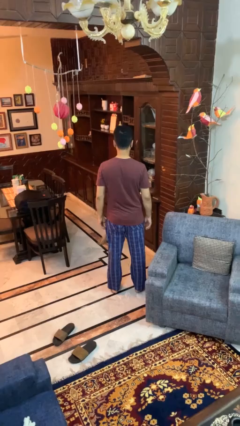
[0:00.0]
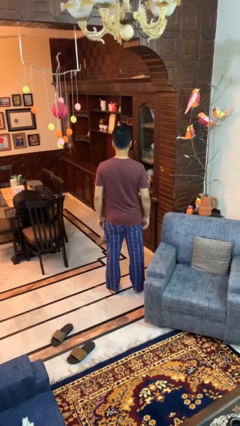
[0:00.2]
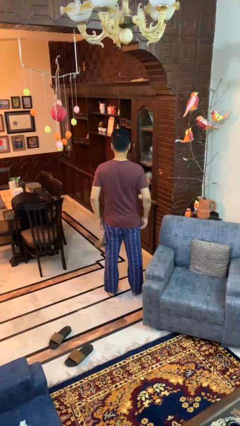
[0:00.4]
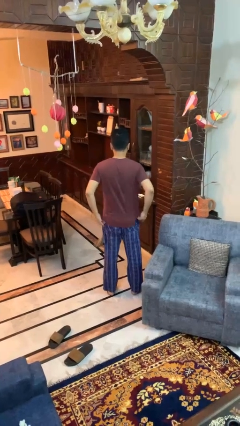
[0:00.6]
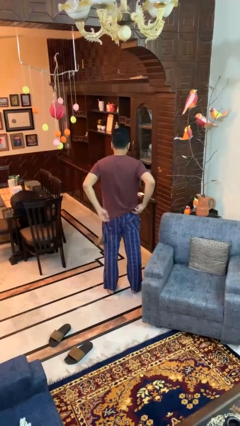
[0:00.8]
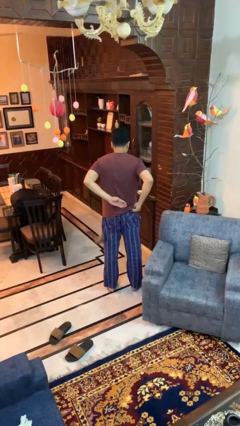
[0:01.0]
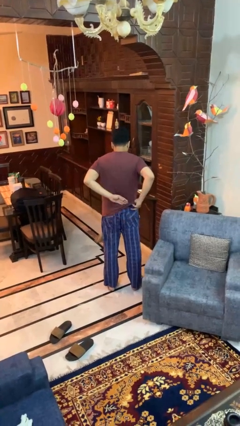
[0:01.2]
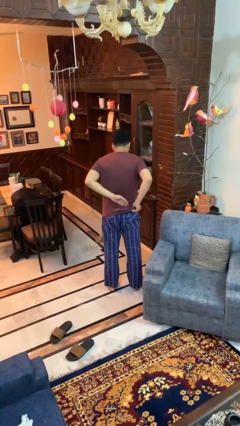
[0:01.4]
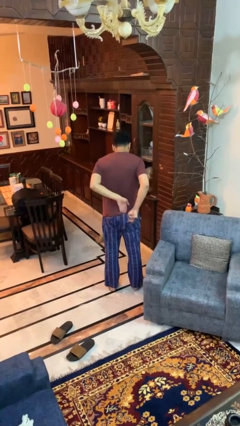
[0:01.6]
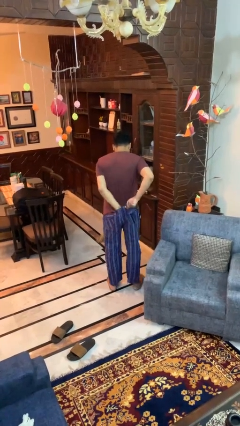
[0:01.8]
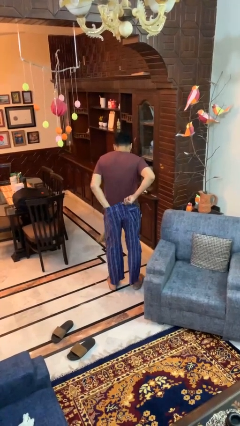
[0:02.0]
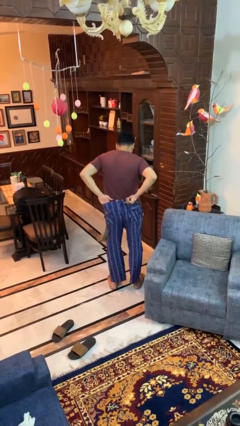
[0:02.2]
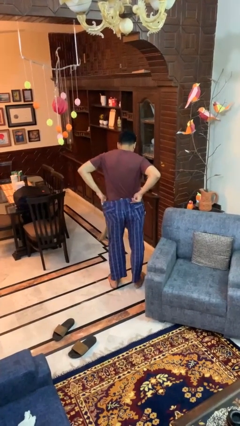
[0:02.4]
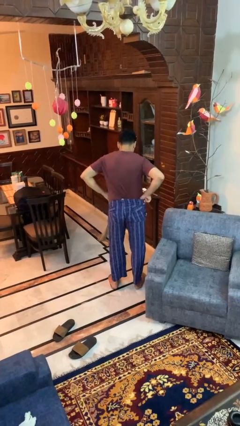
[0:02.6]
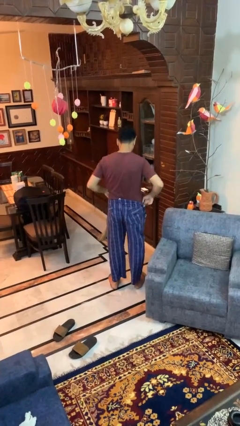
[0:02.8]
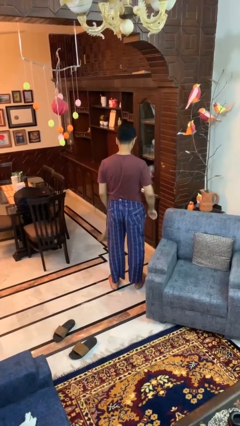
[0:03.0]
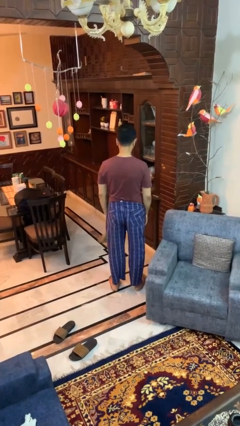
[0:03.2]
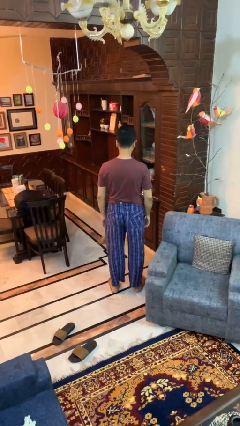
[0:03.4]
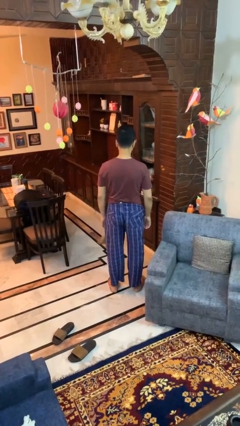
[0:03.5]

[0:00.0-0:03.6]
person tucks in shirt

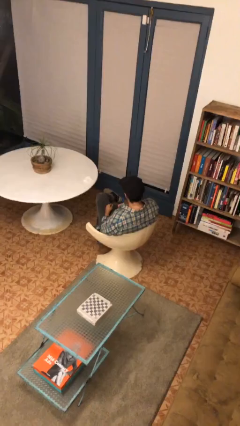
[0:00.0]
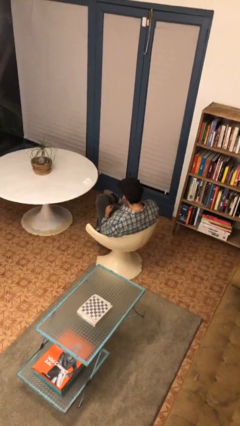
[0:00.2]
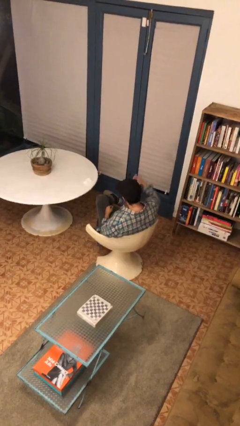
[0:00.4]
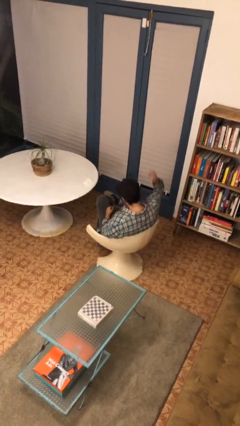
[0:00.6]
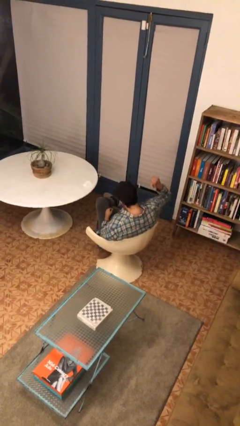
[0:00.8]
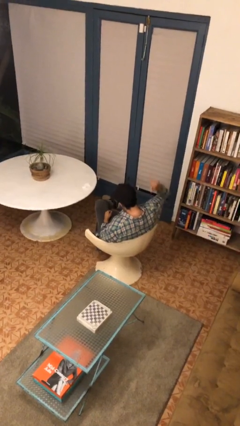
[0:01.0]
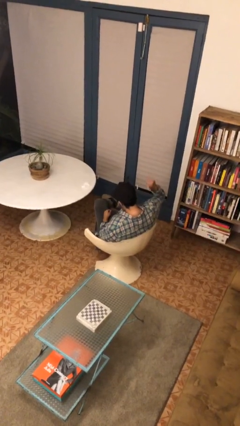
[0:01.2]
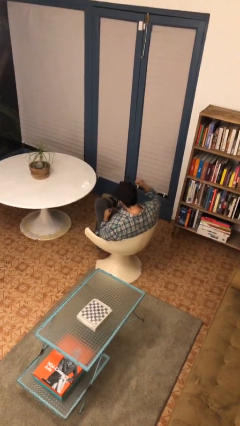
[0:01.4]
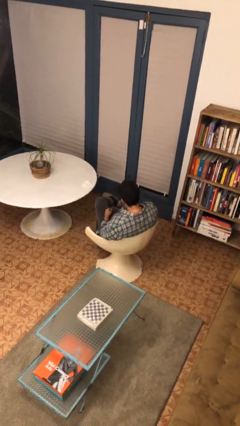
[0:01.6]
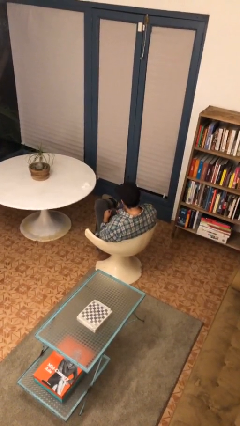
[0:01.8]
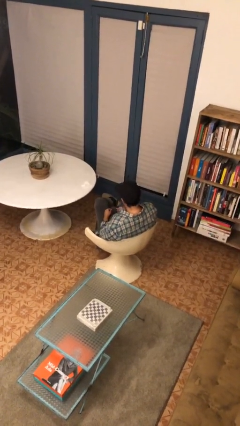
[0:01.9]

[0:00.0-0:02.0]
person gestures behind me

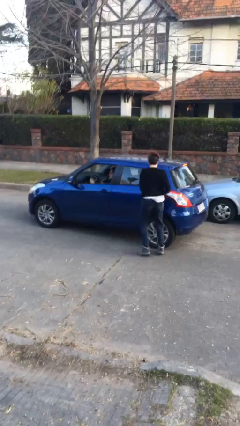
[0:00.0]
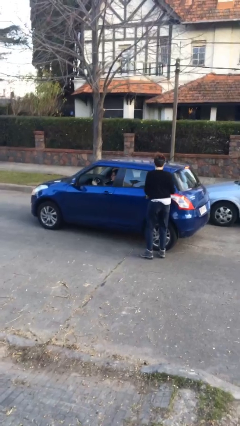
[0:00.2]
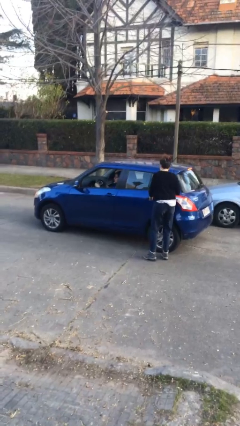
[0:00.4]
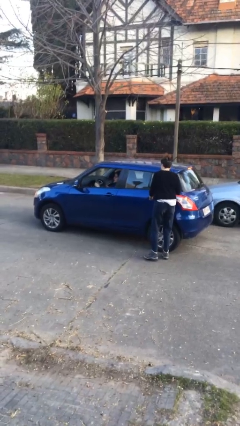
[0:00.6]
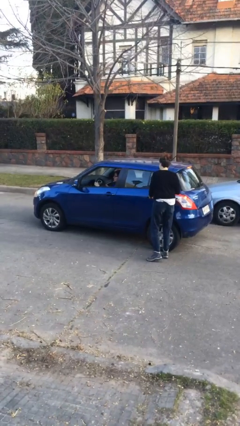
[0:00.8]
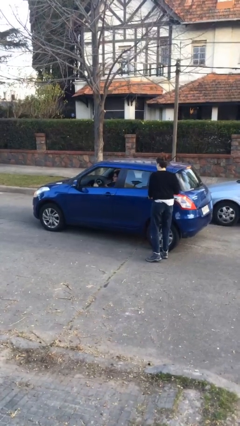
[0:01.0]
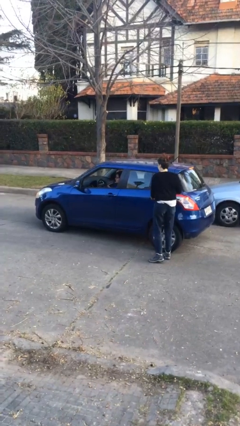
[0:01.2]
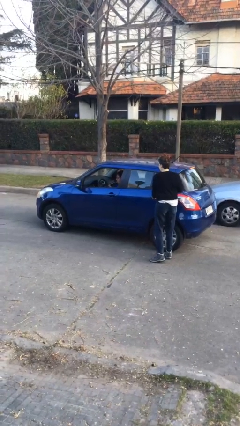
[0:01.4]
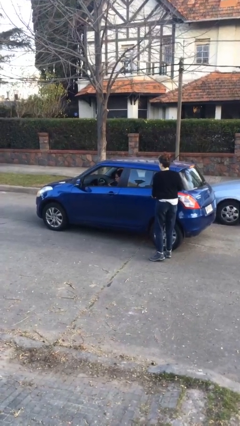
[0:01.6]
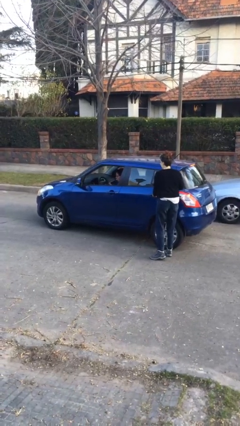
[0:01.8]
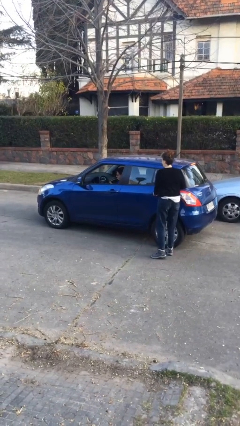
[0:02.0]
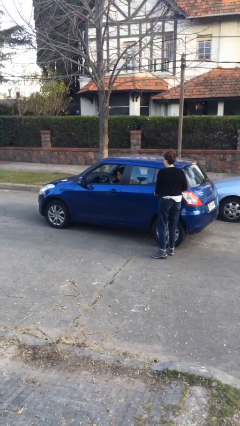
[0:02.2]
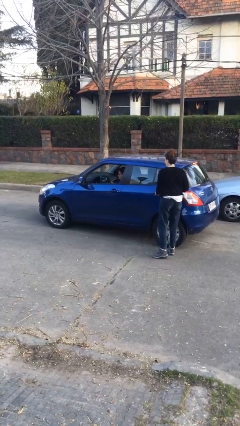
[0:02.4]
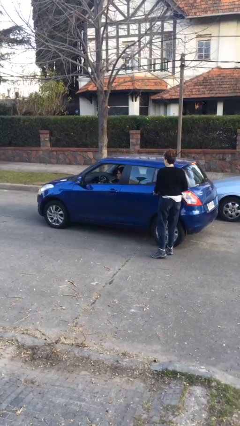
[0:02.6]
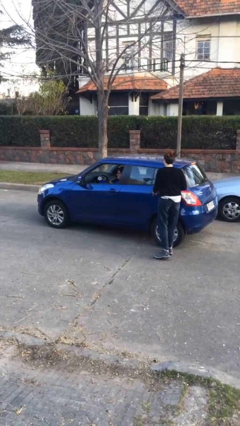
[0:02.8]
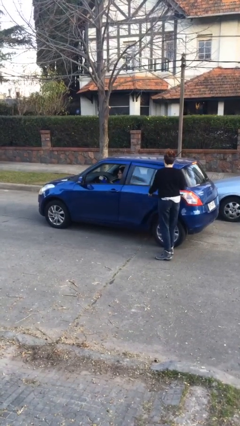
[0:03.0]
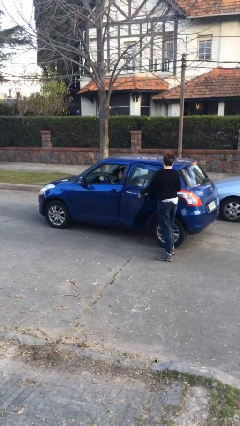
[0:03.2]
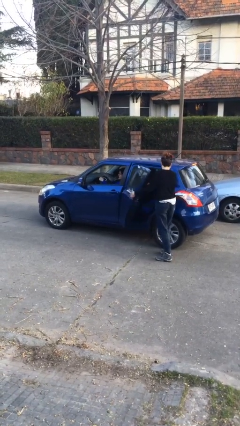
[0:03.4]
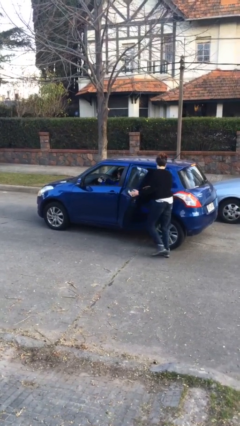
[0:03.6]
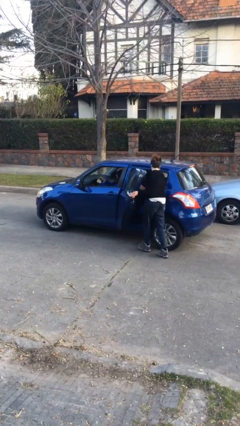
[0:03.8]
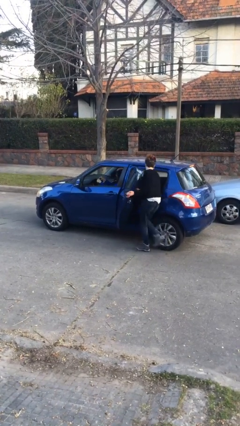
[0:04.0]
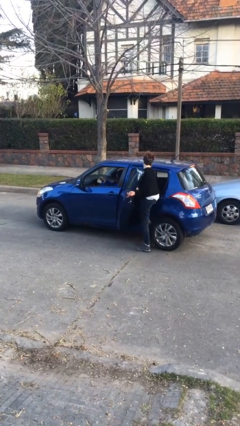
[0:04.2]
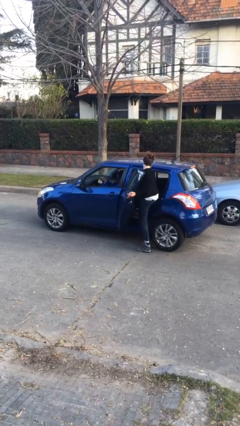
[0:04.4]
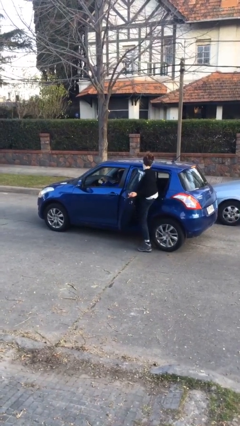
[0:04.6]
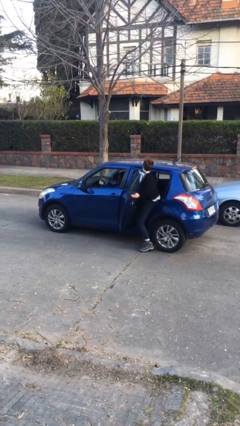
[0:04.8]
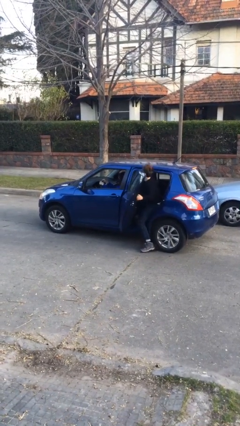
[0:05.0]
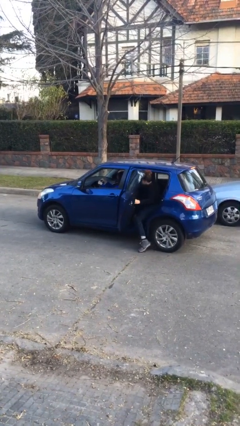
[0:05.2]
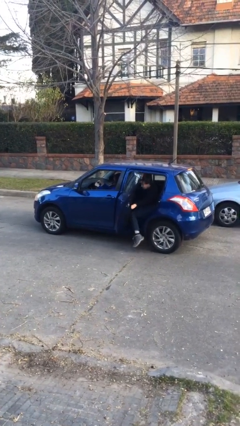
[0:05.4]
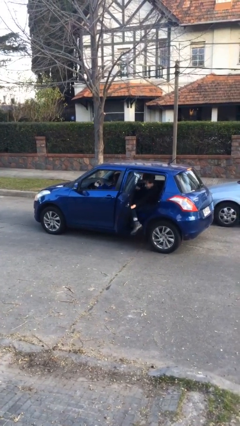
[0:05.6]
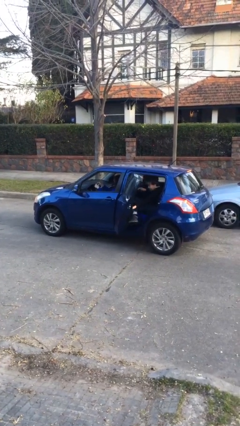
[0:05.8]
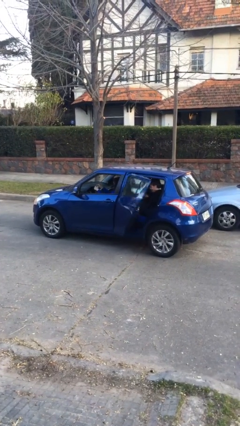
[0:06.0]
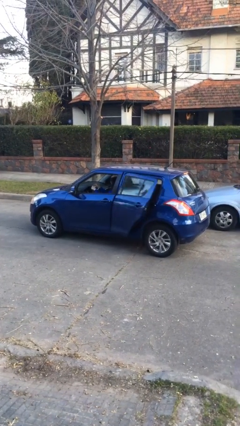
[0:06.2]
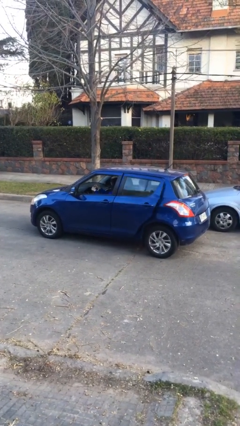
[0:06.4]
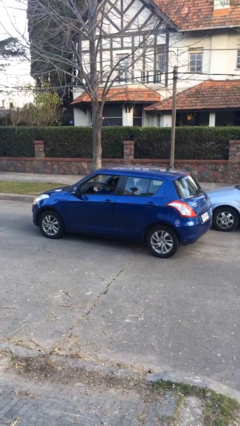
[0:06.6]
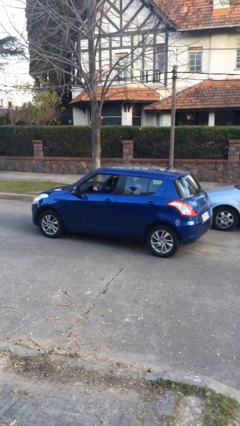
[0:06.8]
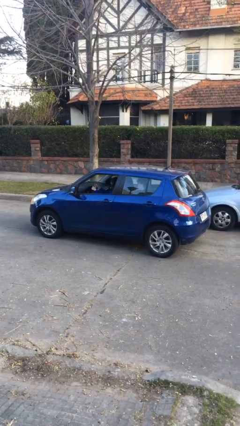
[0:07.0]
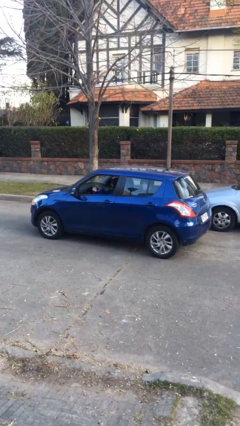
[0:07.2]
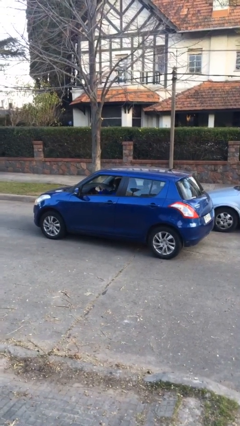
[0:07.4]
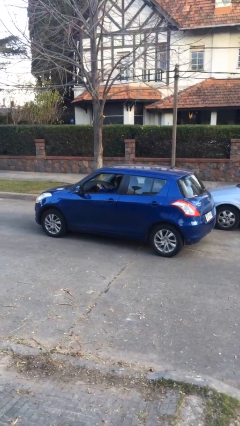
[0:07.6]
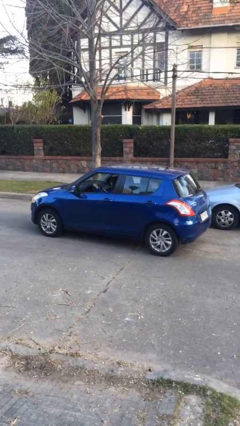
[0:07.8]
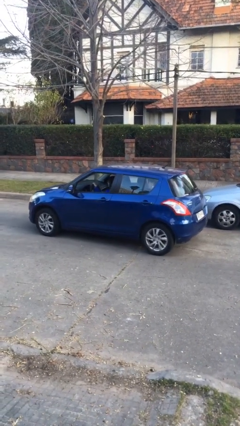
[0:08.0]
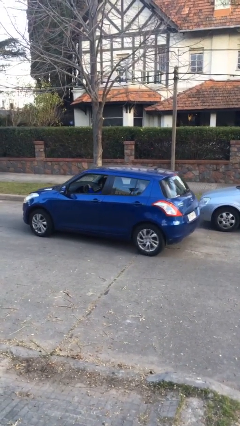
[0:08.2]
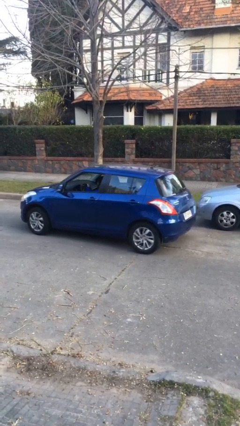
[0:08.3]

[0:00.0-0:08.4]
car picks up person

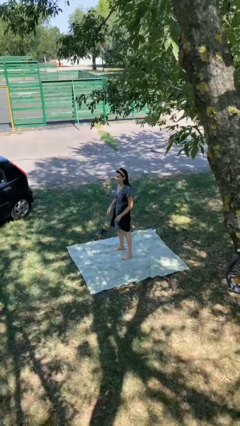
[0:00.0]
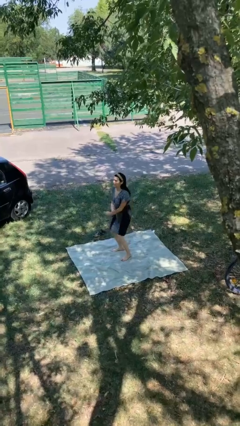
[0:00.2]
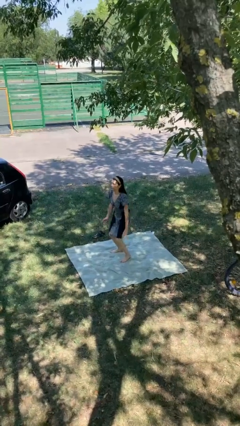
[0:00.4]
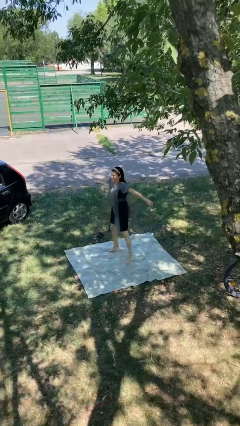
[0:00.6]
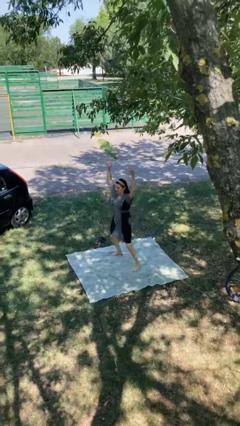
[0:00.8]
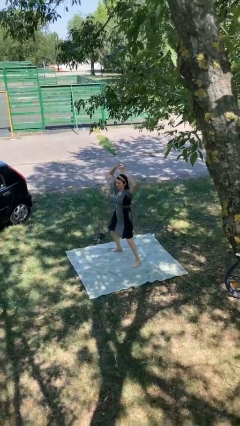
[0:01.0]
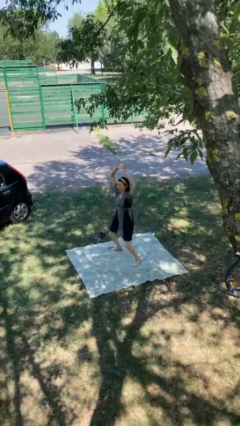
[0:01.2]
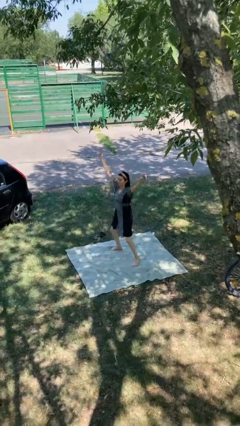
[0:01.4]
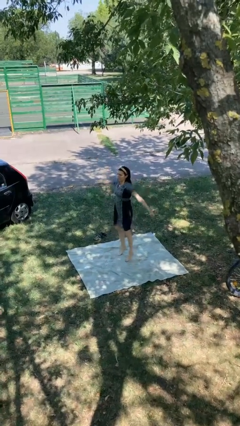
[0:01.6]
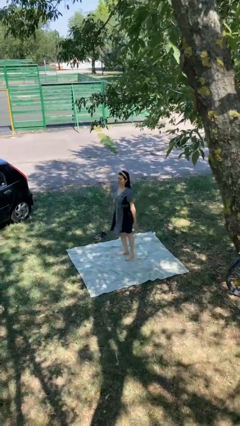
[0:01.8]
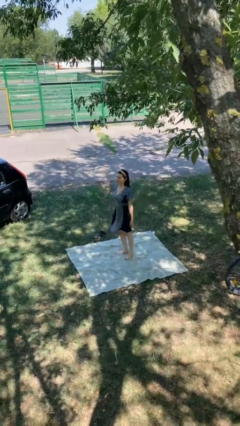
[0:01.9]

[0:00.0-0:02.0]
person exercises with jumping jacks

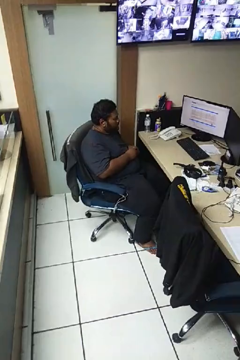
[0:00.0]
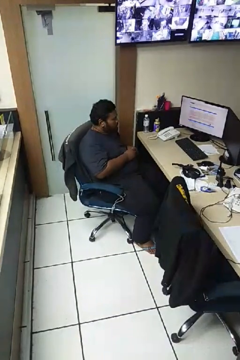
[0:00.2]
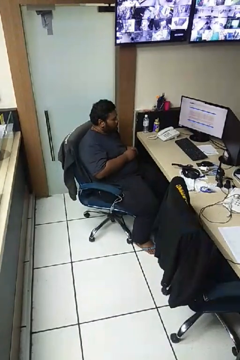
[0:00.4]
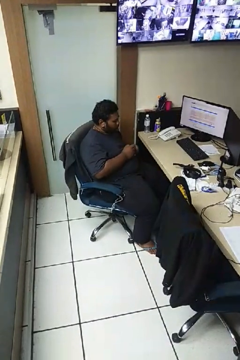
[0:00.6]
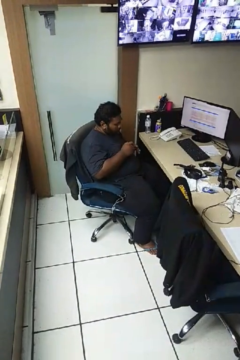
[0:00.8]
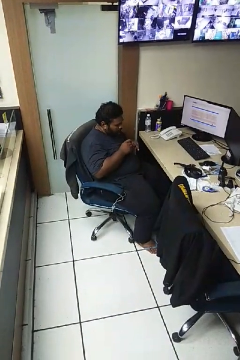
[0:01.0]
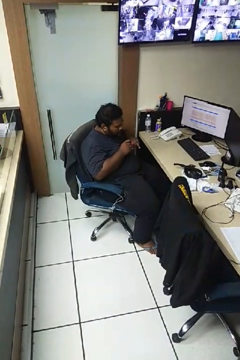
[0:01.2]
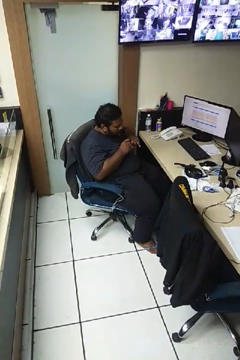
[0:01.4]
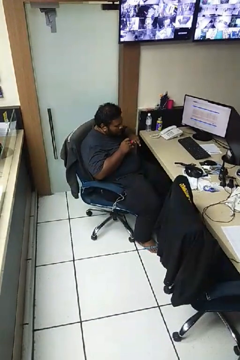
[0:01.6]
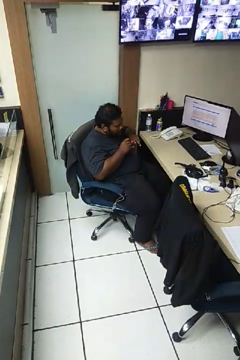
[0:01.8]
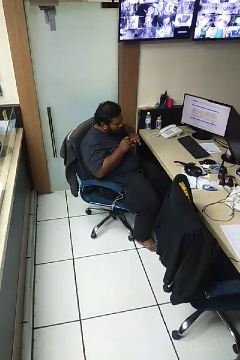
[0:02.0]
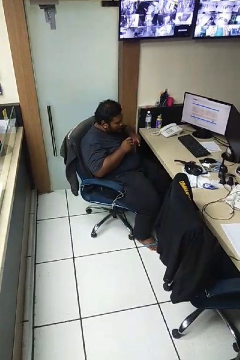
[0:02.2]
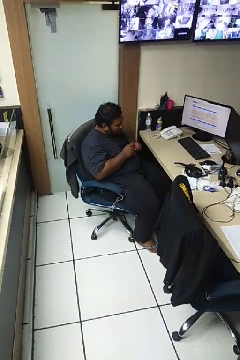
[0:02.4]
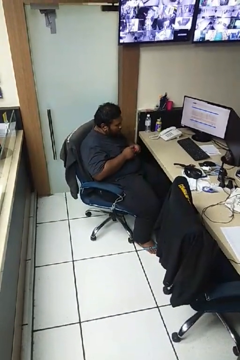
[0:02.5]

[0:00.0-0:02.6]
person paints fingernails
